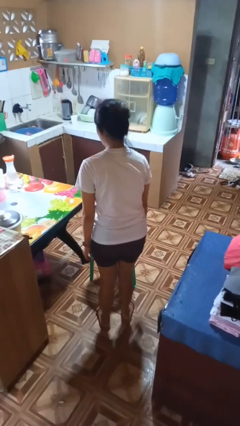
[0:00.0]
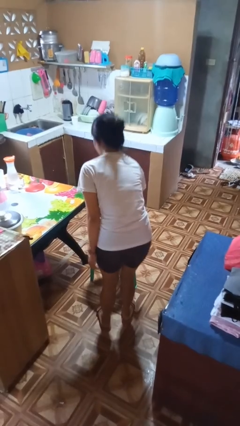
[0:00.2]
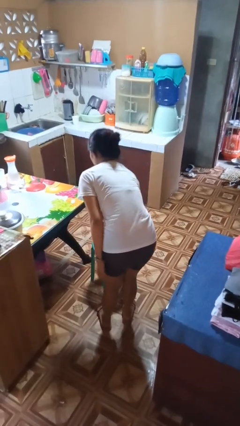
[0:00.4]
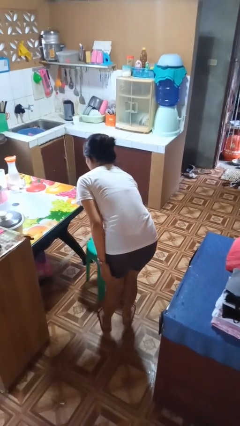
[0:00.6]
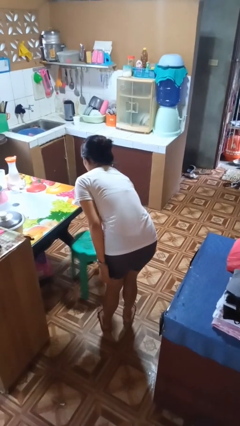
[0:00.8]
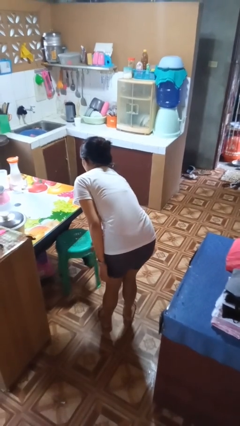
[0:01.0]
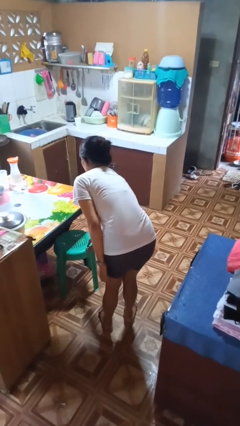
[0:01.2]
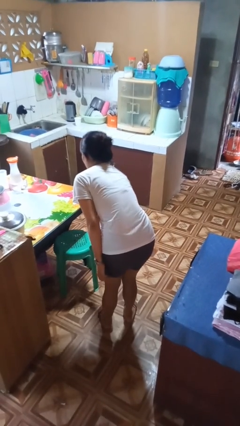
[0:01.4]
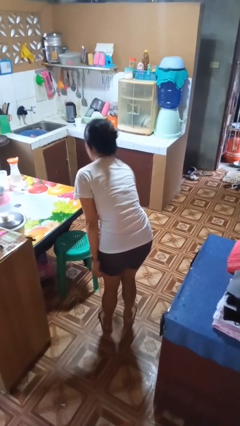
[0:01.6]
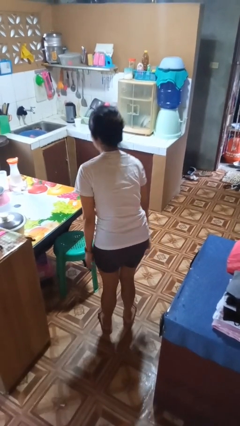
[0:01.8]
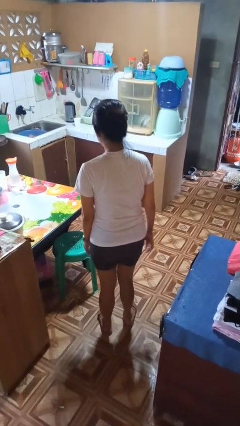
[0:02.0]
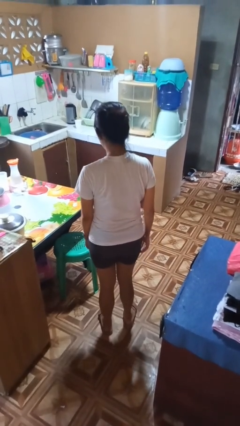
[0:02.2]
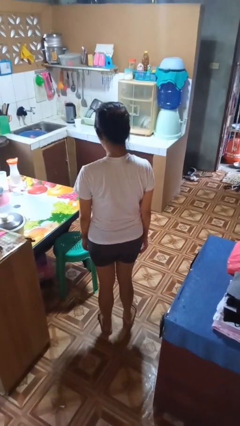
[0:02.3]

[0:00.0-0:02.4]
person pushes in chair

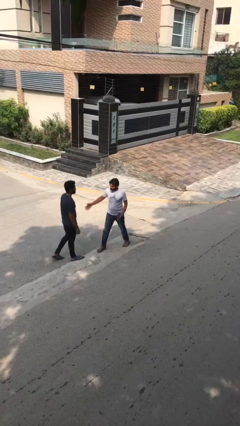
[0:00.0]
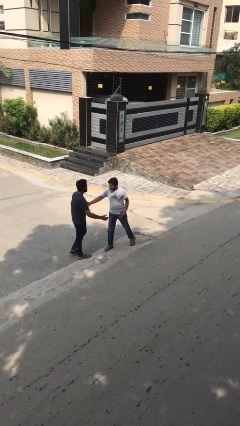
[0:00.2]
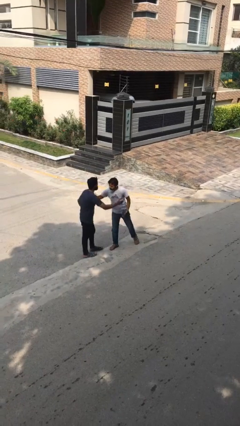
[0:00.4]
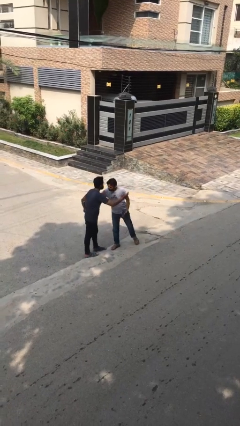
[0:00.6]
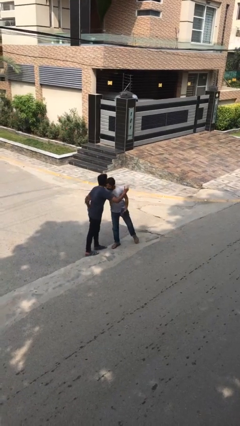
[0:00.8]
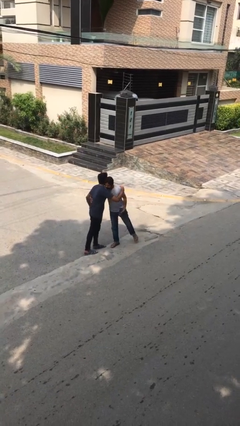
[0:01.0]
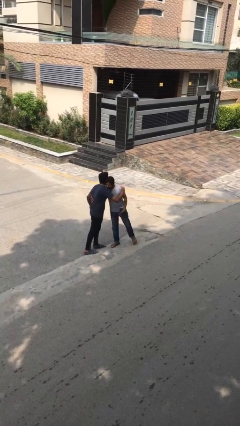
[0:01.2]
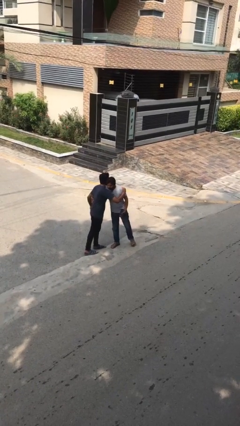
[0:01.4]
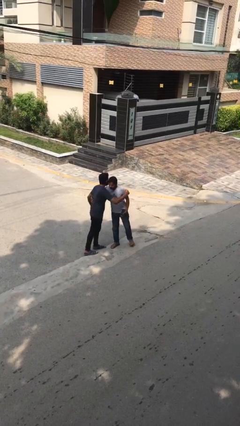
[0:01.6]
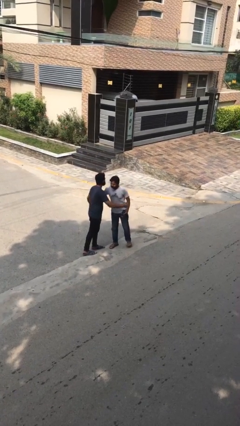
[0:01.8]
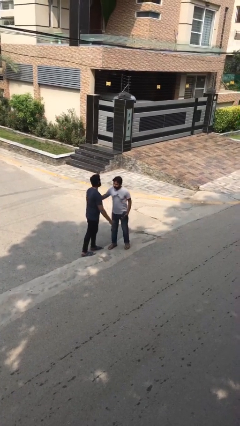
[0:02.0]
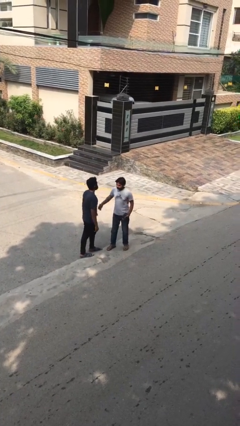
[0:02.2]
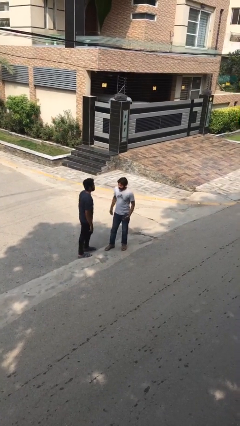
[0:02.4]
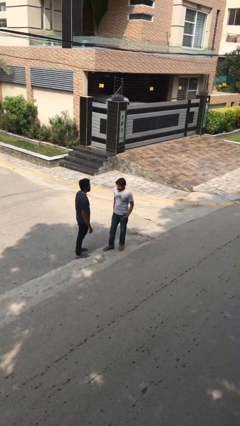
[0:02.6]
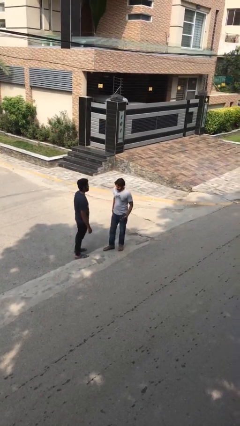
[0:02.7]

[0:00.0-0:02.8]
person embraces person

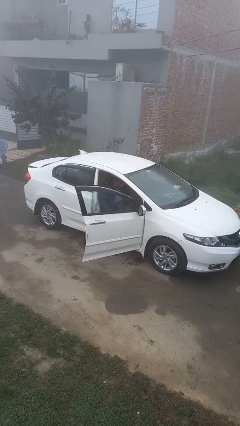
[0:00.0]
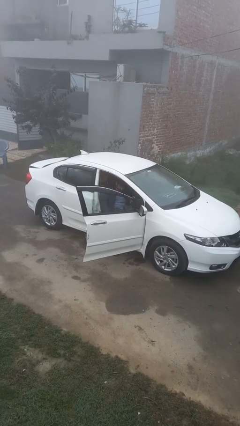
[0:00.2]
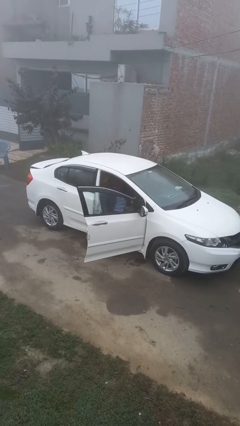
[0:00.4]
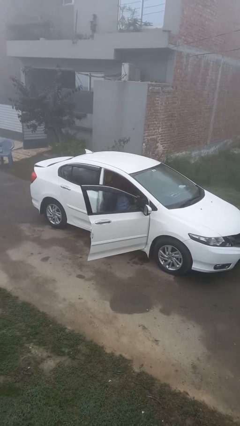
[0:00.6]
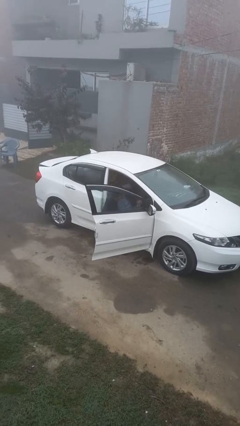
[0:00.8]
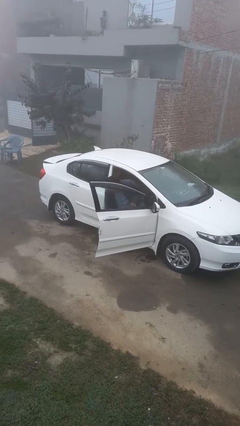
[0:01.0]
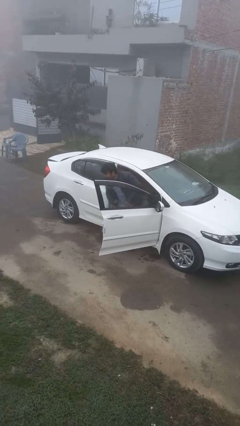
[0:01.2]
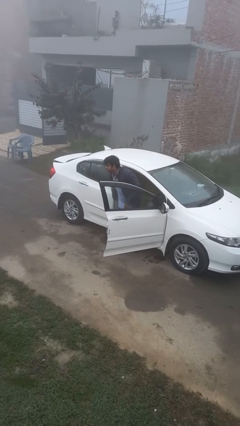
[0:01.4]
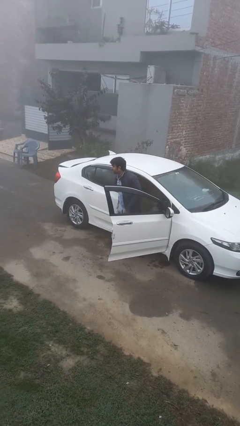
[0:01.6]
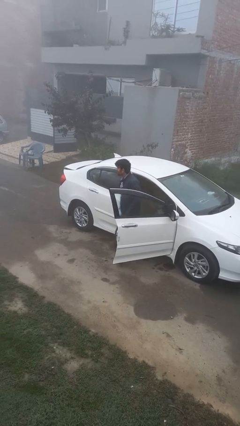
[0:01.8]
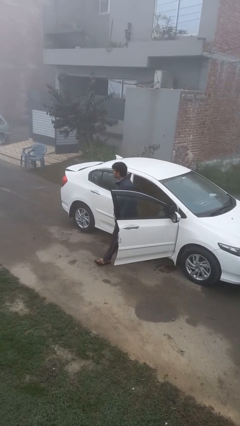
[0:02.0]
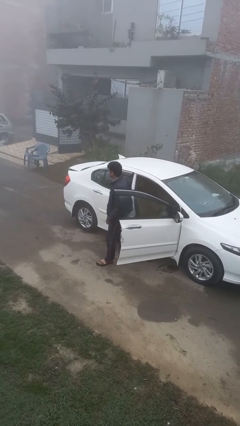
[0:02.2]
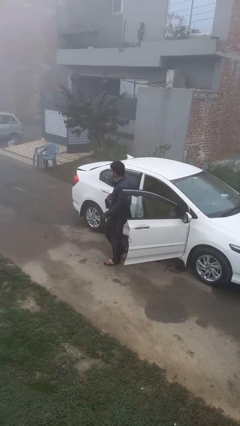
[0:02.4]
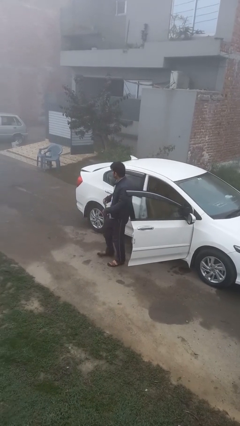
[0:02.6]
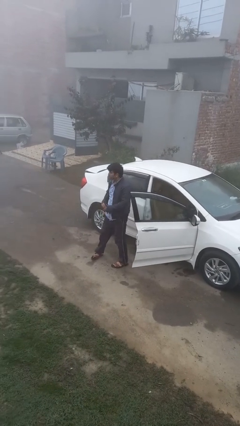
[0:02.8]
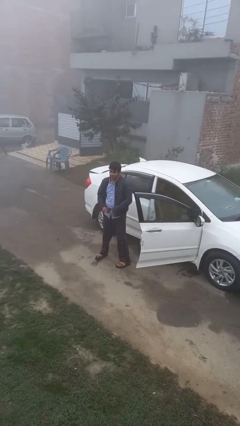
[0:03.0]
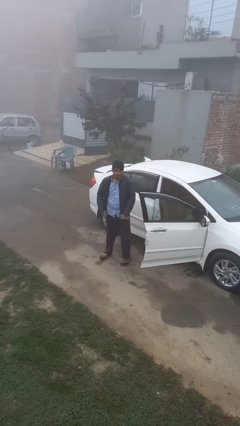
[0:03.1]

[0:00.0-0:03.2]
person exits car

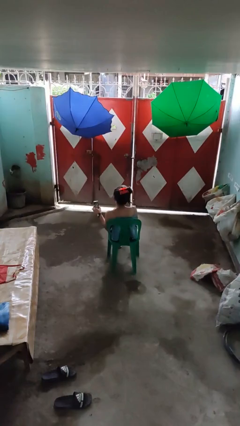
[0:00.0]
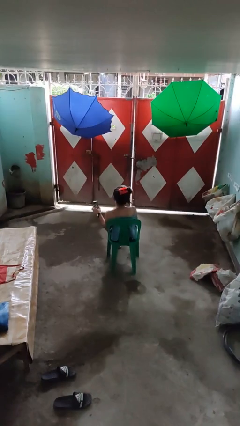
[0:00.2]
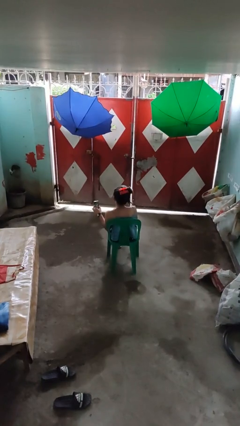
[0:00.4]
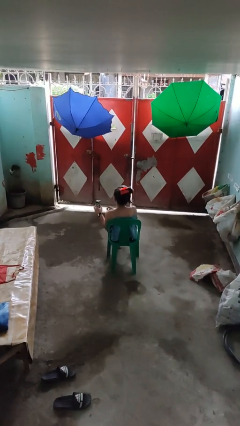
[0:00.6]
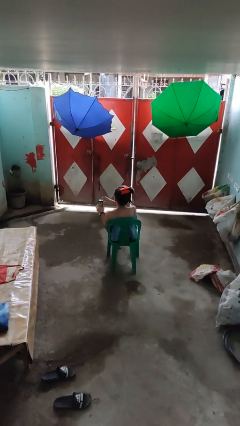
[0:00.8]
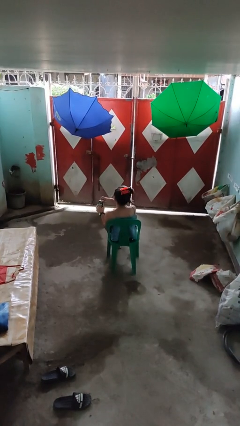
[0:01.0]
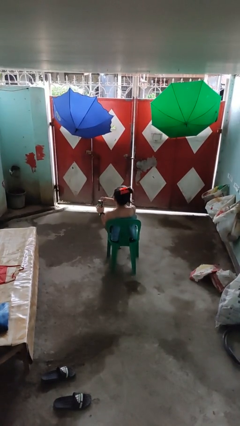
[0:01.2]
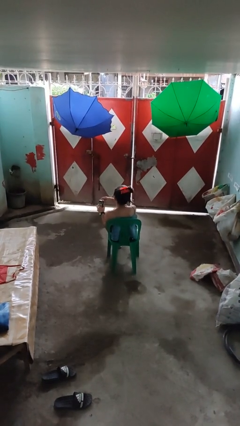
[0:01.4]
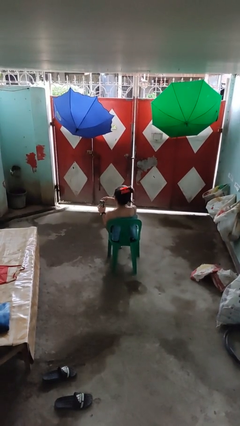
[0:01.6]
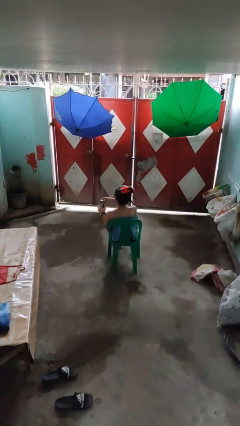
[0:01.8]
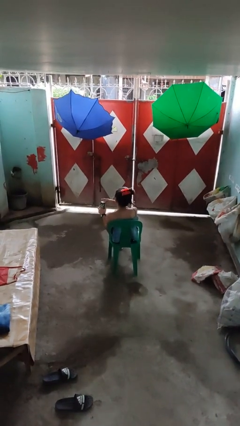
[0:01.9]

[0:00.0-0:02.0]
person opens beverage can

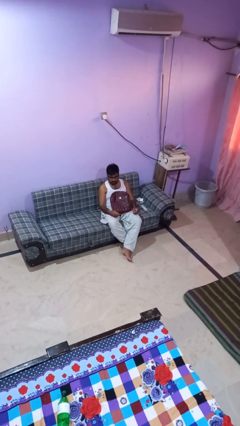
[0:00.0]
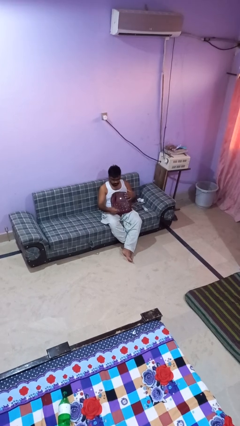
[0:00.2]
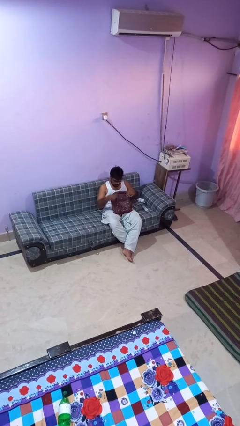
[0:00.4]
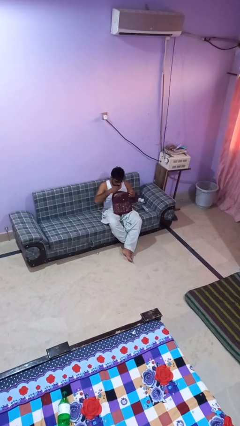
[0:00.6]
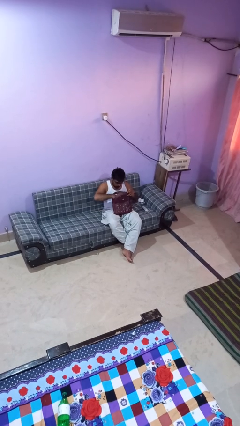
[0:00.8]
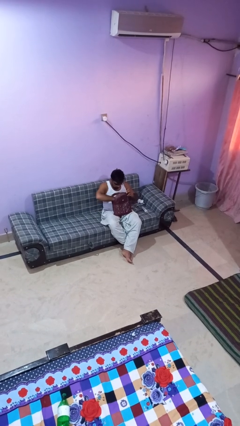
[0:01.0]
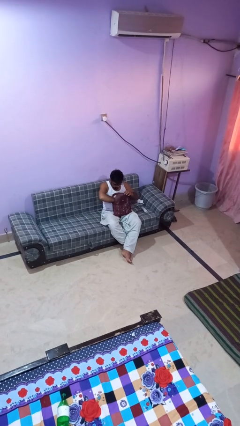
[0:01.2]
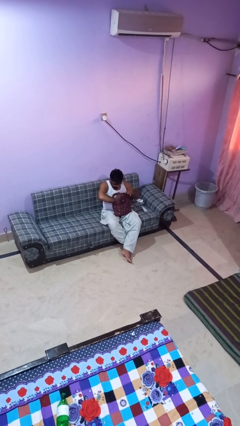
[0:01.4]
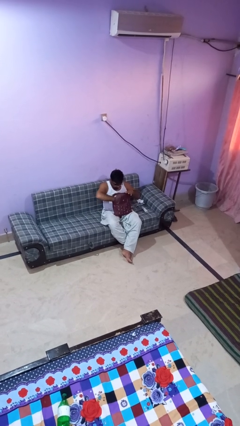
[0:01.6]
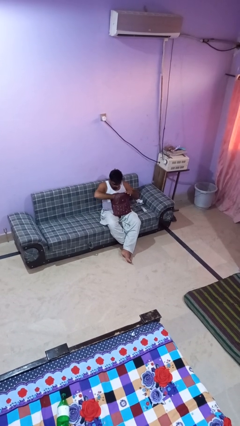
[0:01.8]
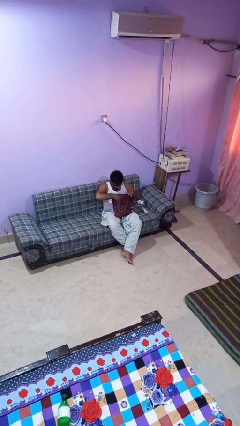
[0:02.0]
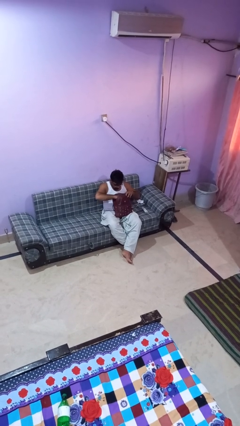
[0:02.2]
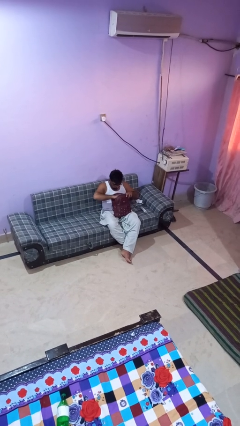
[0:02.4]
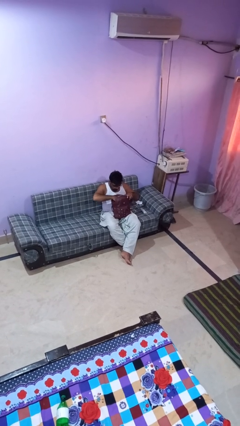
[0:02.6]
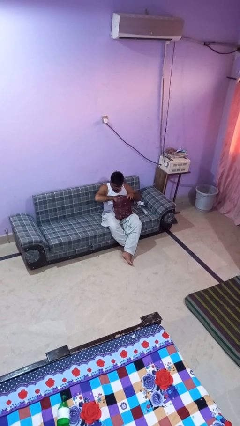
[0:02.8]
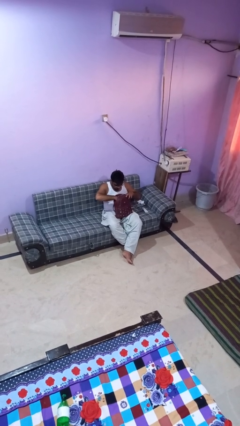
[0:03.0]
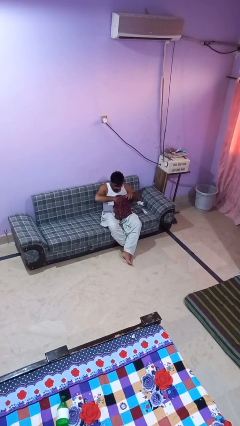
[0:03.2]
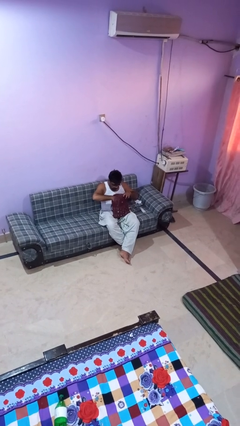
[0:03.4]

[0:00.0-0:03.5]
person searches in backpack

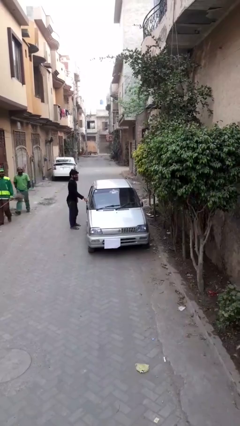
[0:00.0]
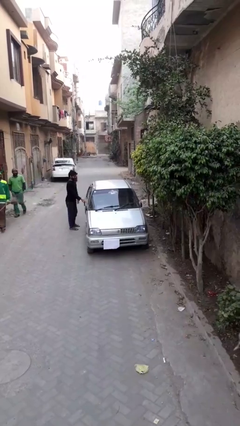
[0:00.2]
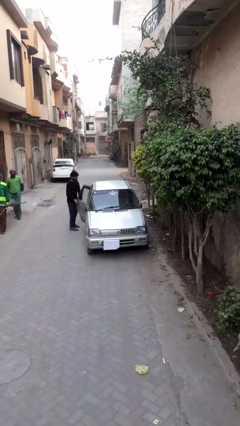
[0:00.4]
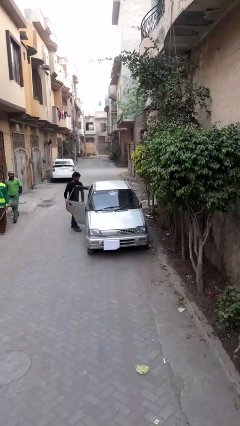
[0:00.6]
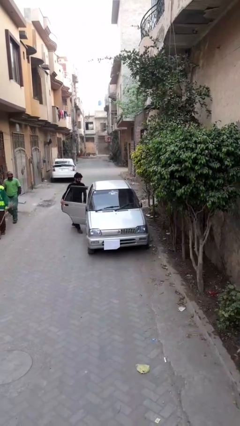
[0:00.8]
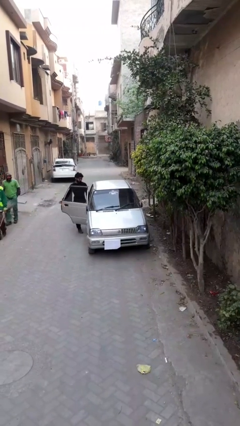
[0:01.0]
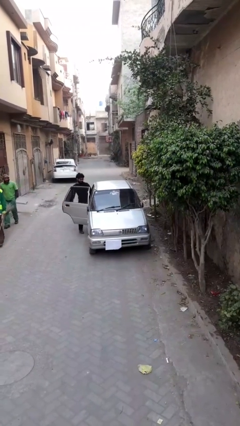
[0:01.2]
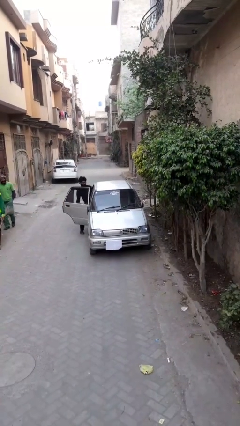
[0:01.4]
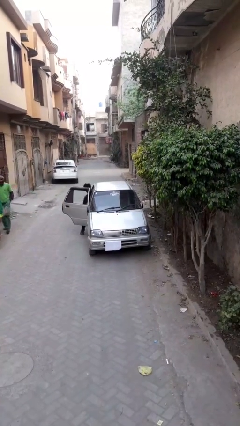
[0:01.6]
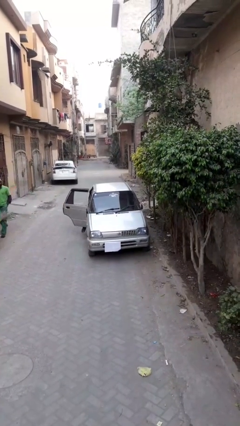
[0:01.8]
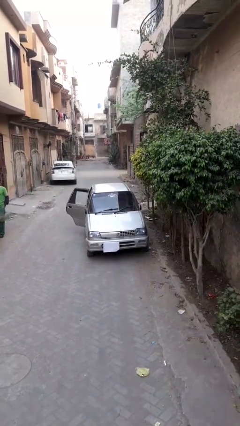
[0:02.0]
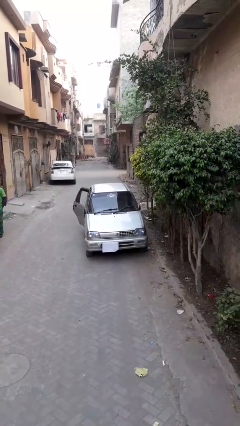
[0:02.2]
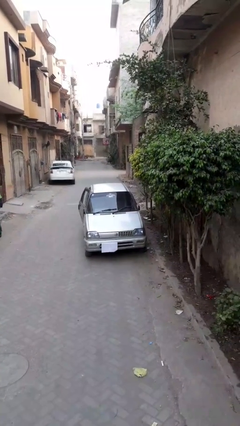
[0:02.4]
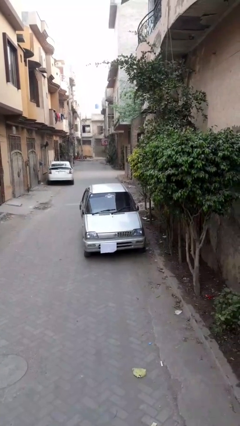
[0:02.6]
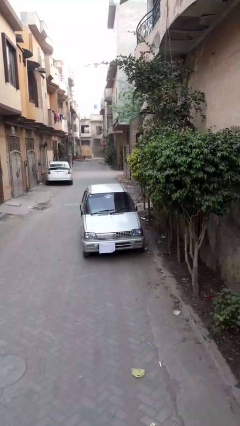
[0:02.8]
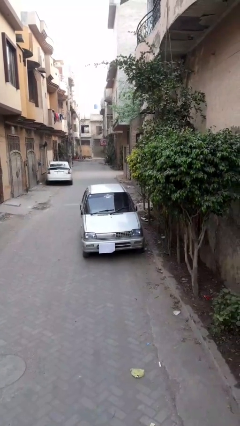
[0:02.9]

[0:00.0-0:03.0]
car picks up person

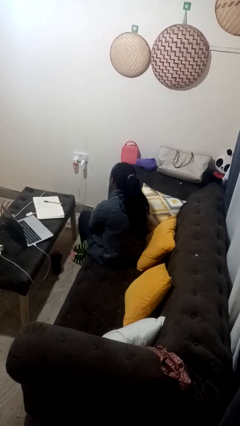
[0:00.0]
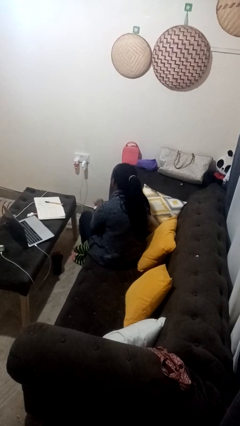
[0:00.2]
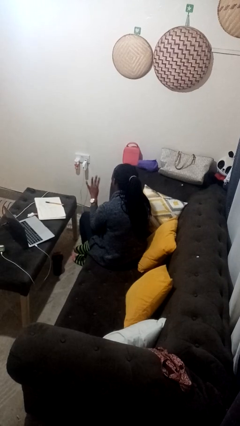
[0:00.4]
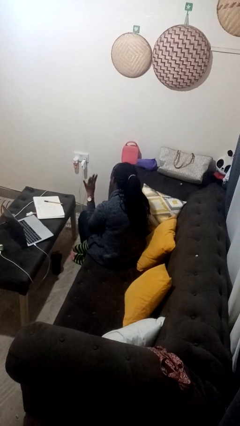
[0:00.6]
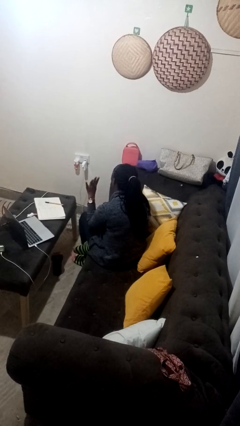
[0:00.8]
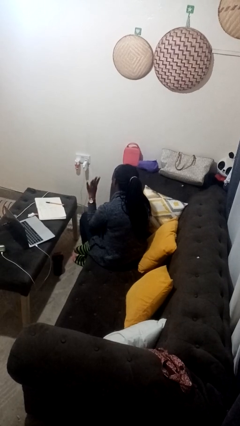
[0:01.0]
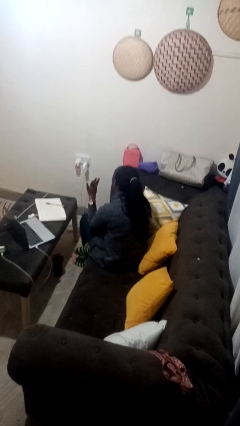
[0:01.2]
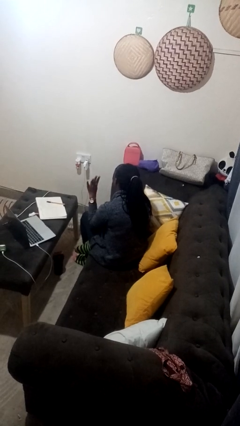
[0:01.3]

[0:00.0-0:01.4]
person gestures number four
